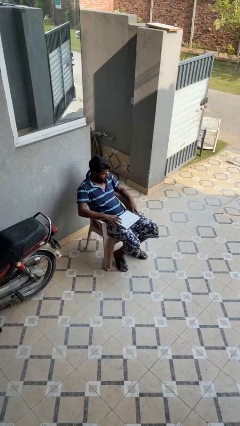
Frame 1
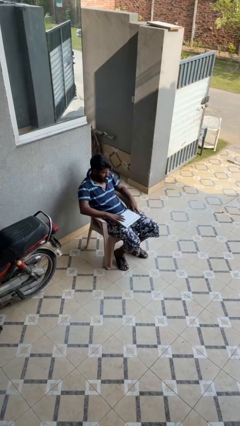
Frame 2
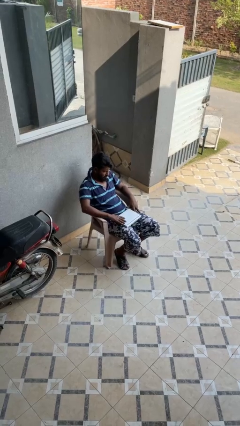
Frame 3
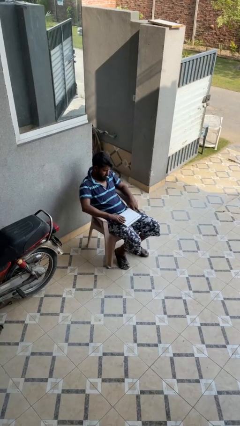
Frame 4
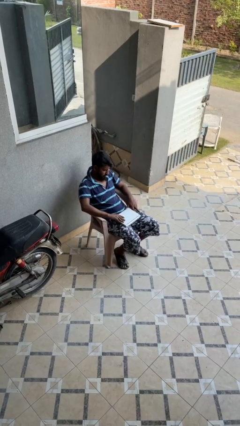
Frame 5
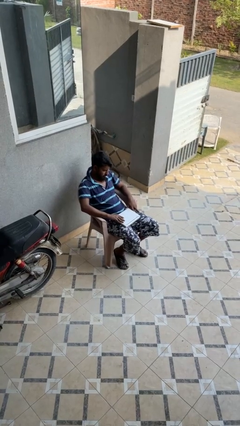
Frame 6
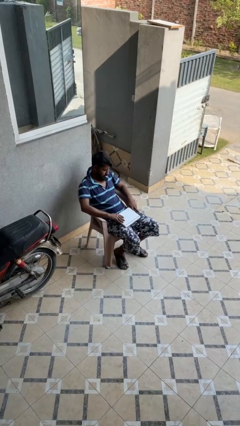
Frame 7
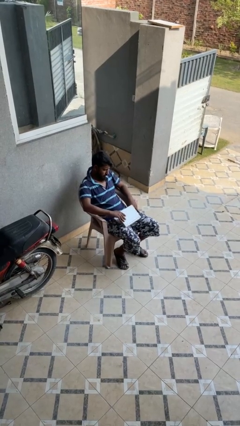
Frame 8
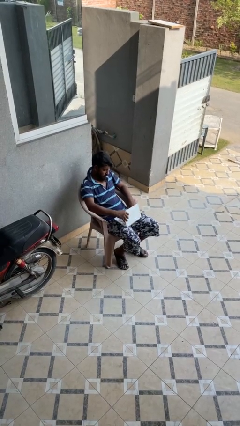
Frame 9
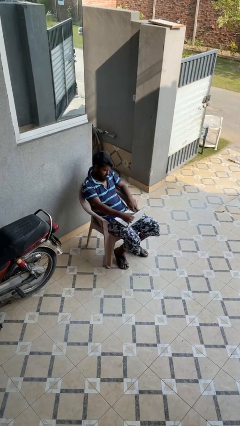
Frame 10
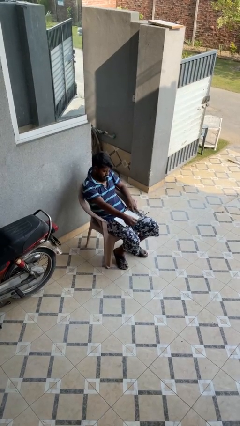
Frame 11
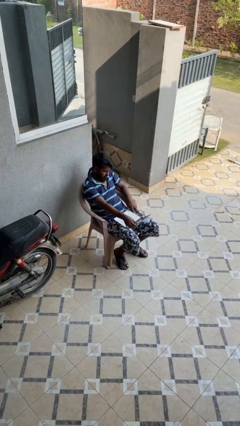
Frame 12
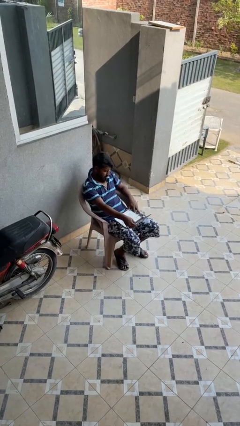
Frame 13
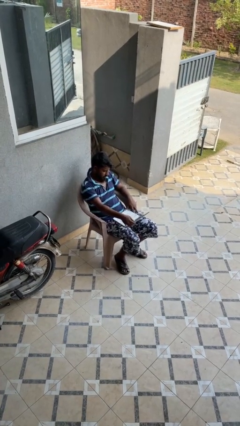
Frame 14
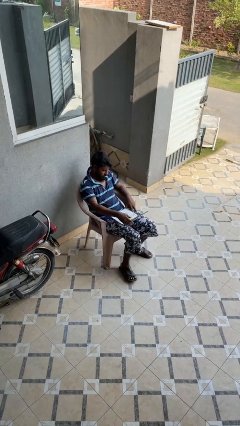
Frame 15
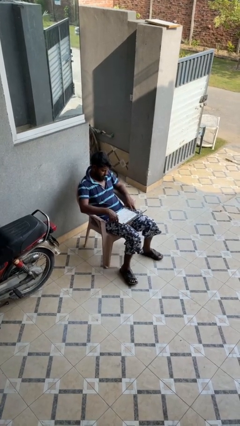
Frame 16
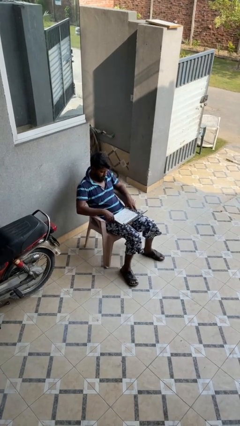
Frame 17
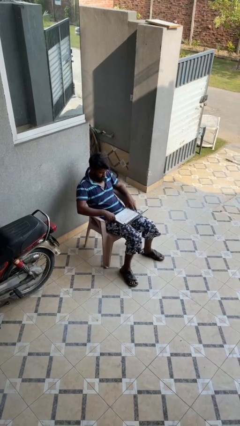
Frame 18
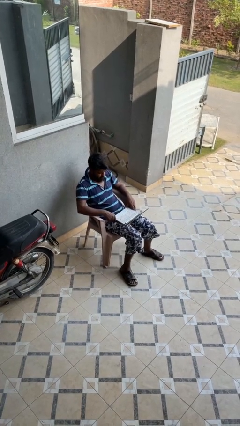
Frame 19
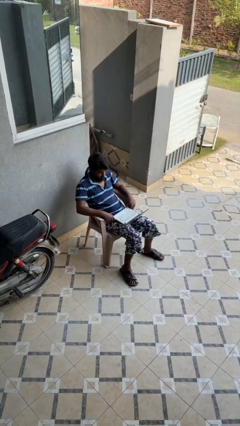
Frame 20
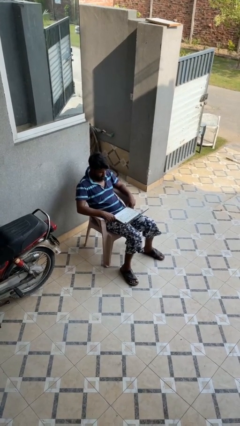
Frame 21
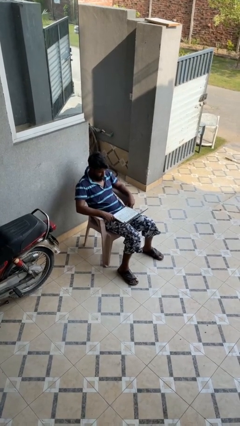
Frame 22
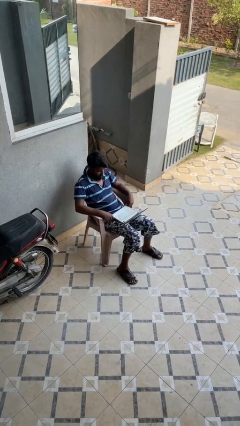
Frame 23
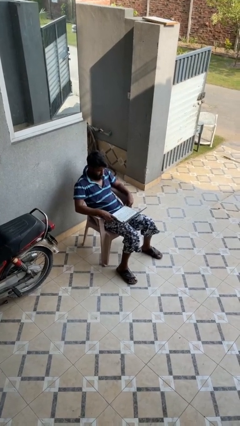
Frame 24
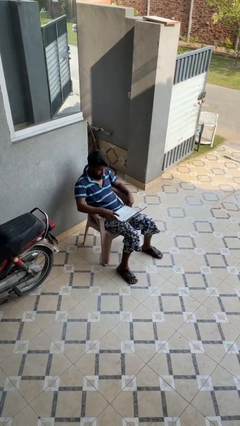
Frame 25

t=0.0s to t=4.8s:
person opens laptop

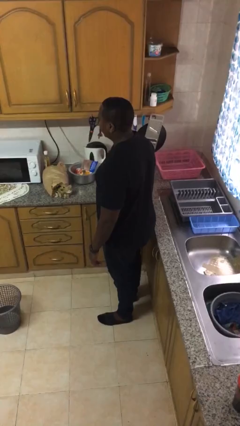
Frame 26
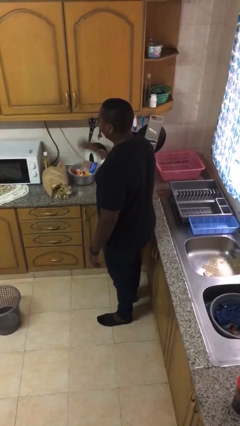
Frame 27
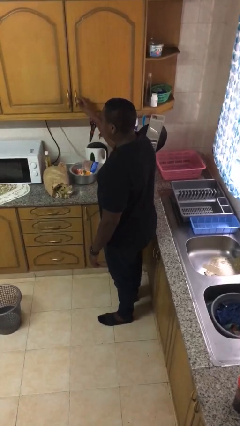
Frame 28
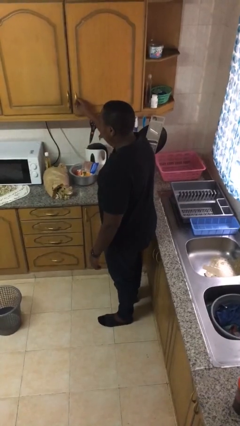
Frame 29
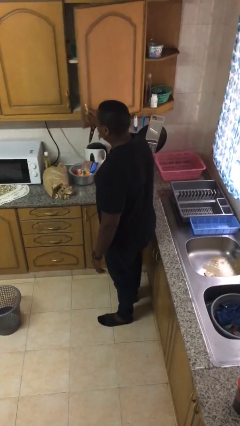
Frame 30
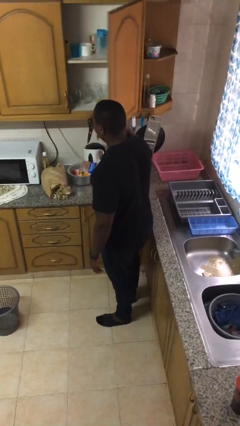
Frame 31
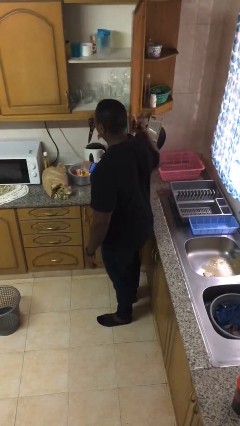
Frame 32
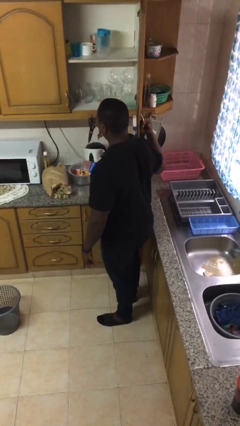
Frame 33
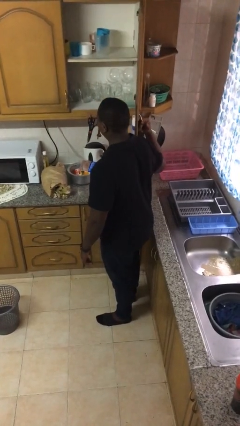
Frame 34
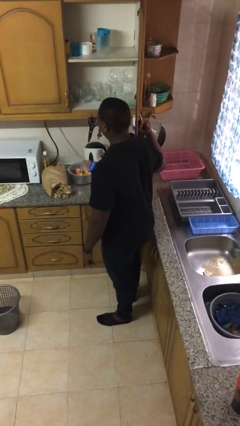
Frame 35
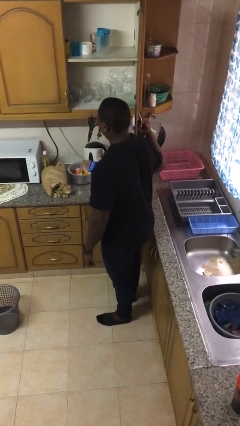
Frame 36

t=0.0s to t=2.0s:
person opens cabinet

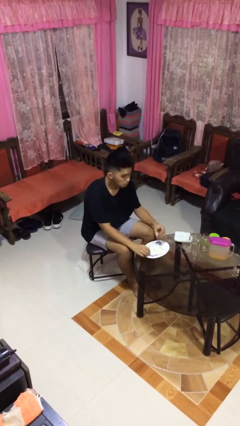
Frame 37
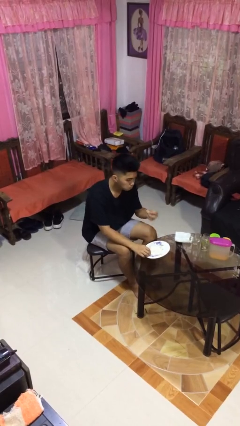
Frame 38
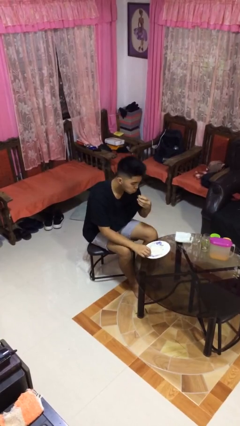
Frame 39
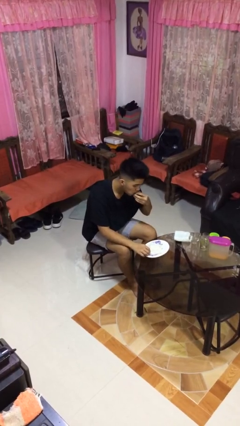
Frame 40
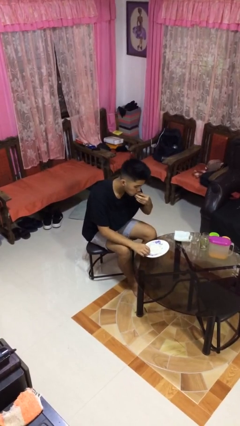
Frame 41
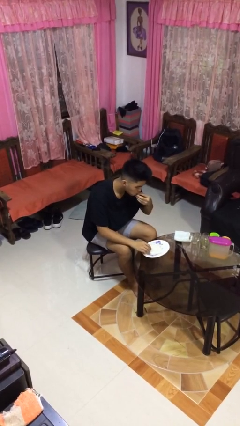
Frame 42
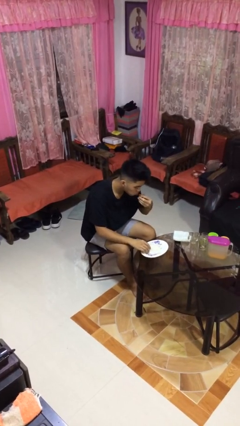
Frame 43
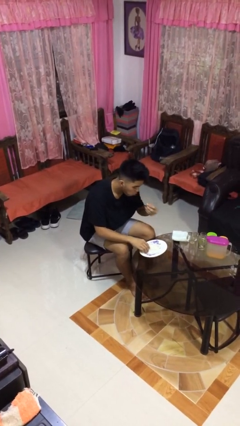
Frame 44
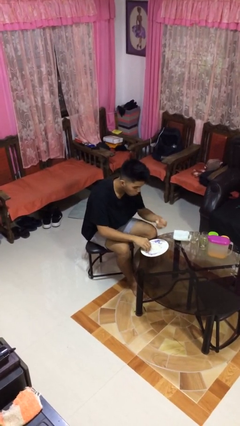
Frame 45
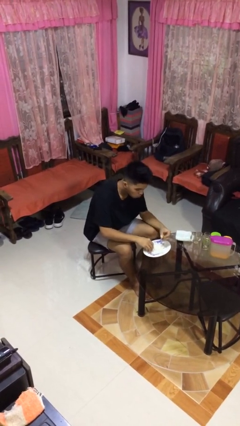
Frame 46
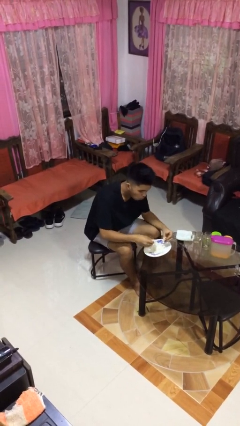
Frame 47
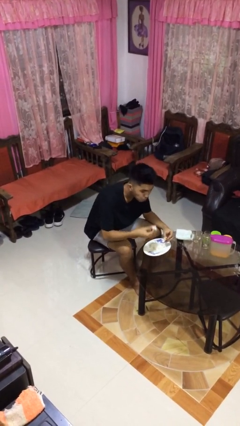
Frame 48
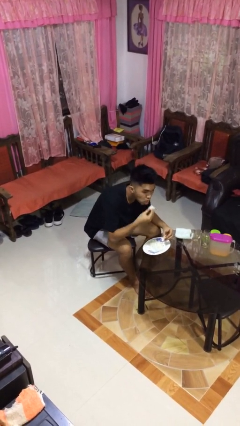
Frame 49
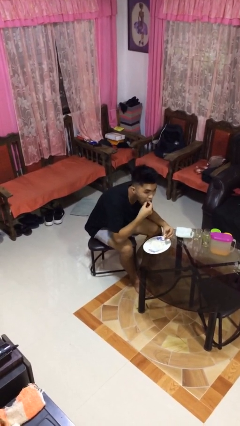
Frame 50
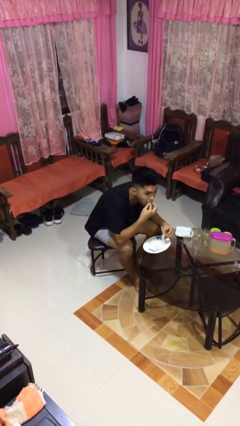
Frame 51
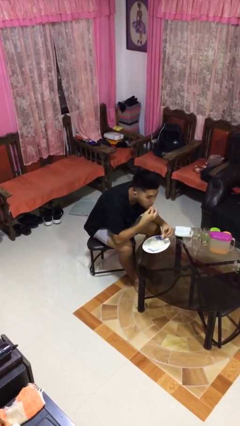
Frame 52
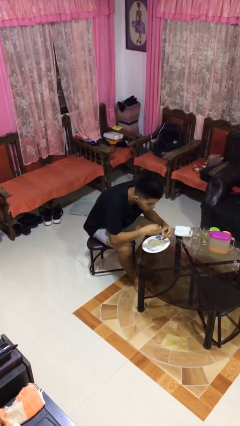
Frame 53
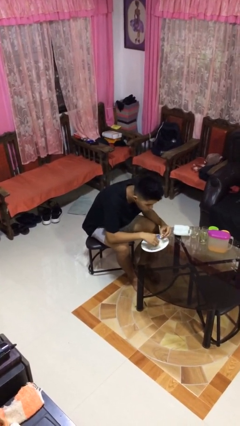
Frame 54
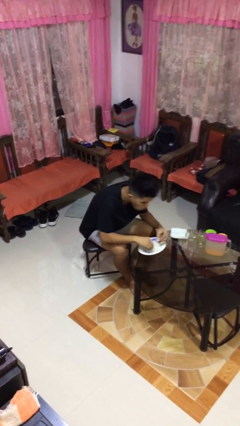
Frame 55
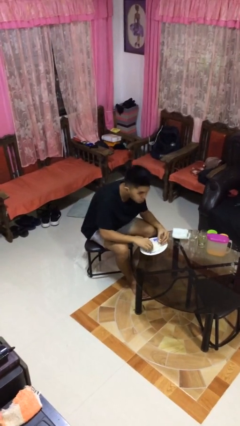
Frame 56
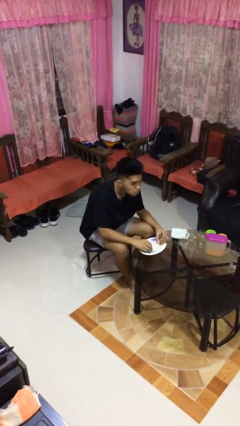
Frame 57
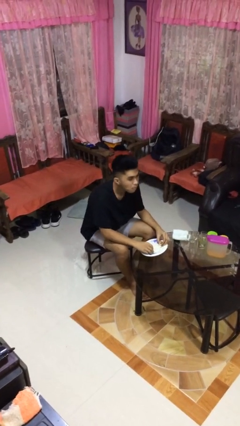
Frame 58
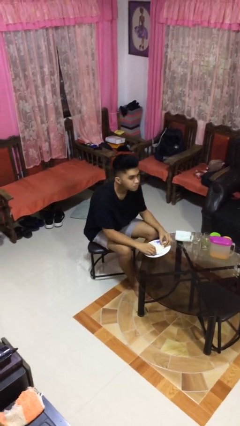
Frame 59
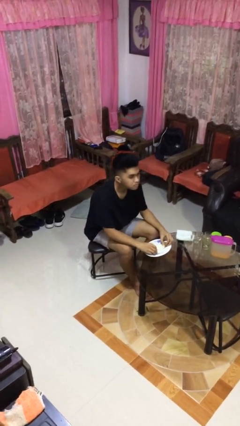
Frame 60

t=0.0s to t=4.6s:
person eats with hands

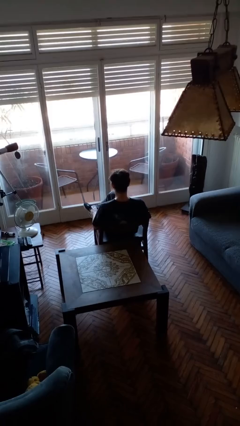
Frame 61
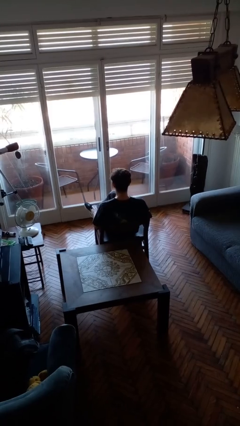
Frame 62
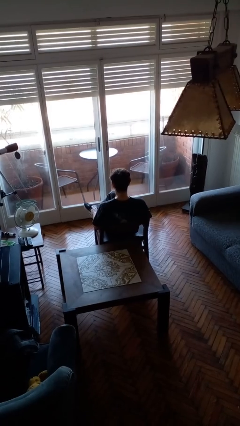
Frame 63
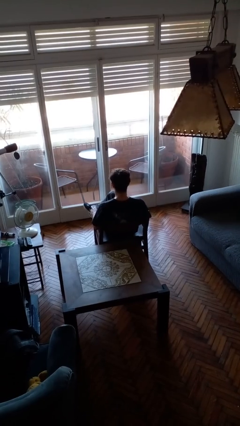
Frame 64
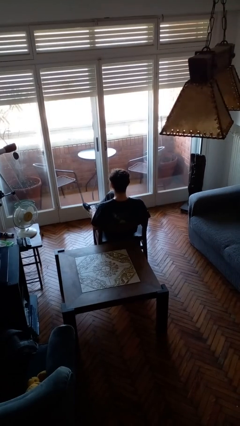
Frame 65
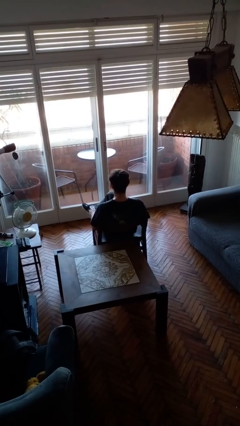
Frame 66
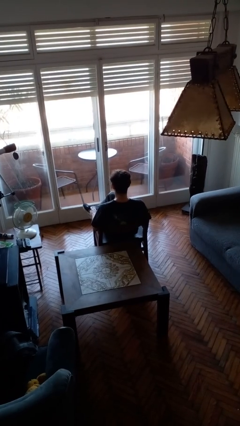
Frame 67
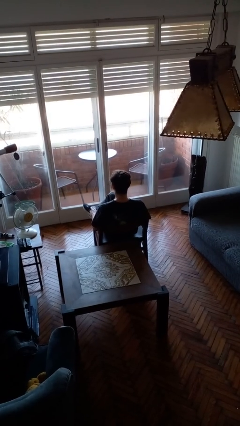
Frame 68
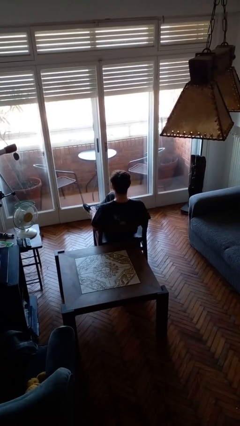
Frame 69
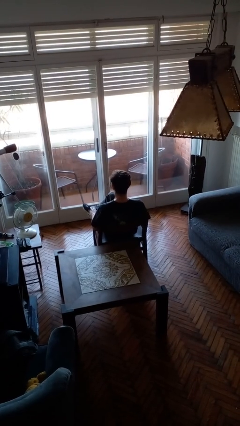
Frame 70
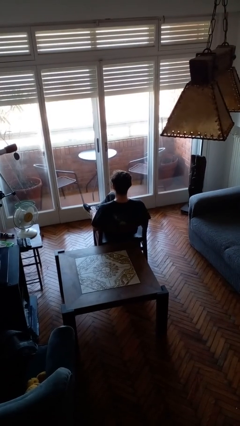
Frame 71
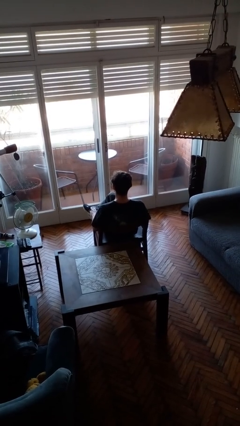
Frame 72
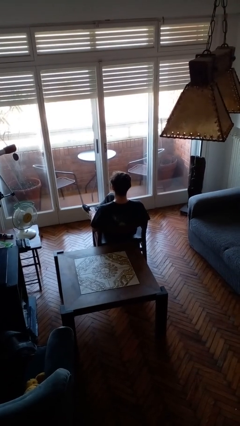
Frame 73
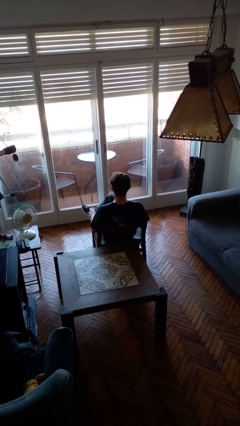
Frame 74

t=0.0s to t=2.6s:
person nods head

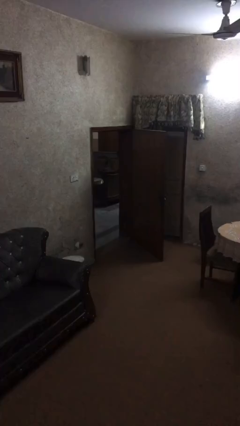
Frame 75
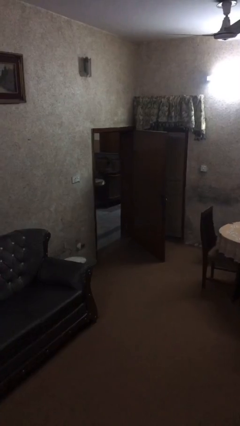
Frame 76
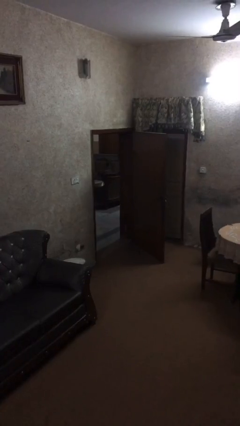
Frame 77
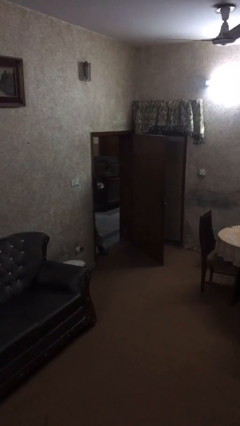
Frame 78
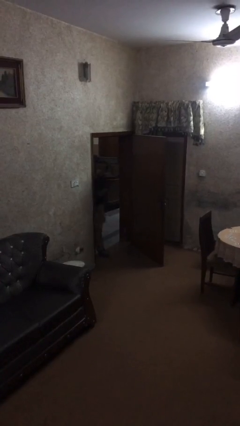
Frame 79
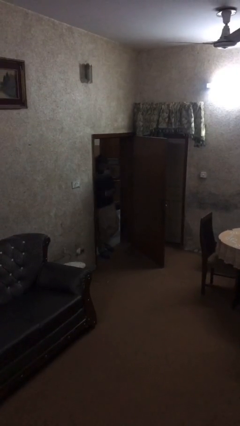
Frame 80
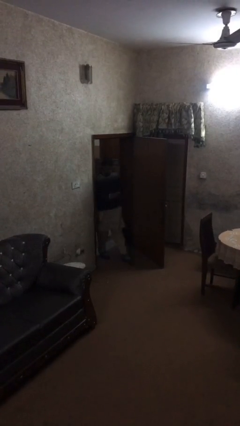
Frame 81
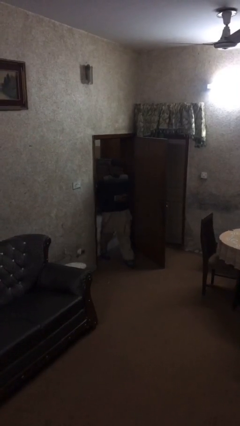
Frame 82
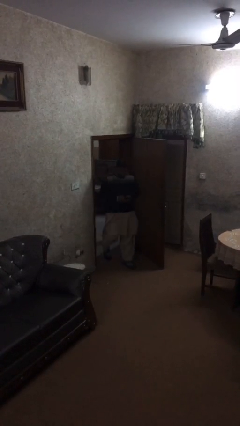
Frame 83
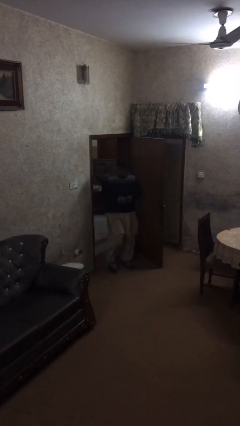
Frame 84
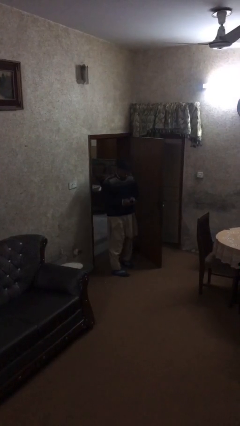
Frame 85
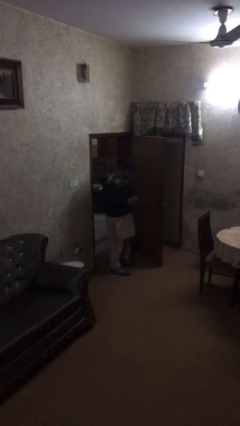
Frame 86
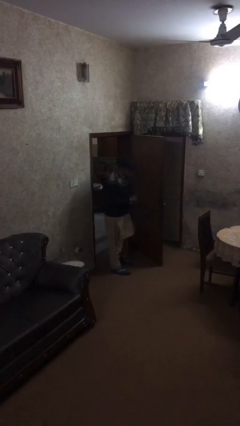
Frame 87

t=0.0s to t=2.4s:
person enters scene through structure

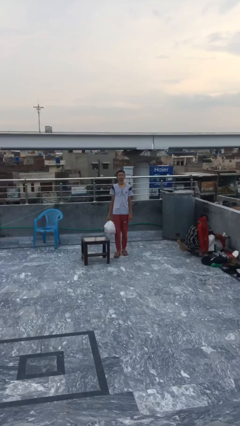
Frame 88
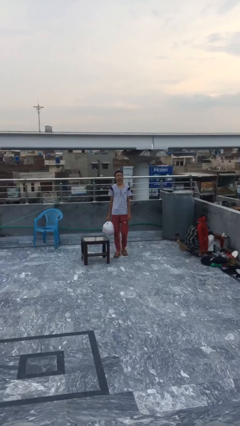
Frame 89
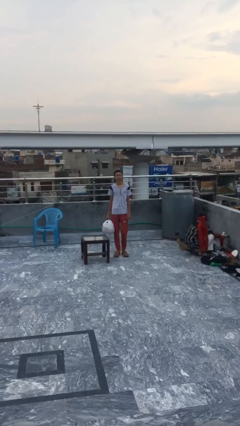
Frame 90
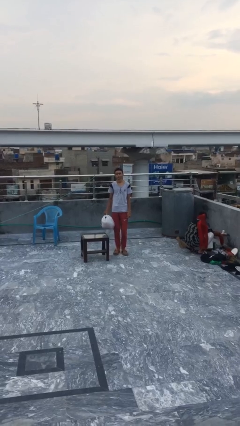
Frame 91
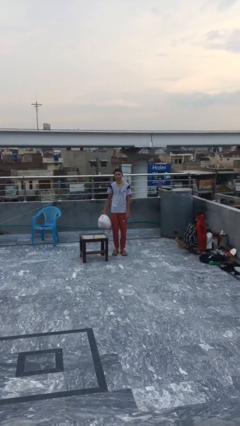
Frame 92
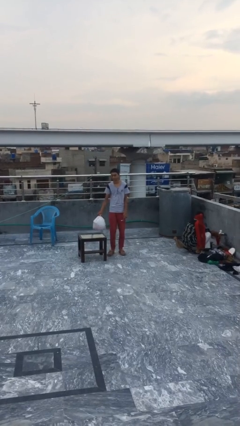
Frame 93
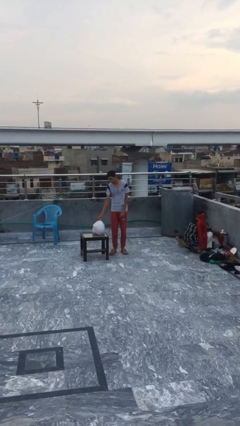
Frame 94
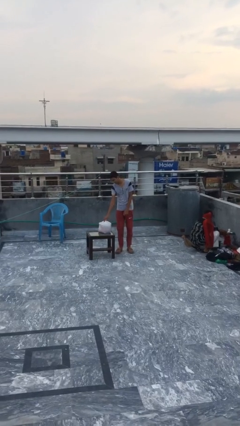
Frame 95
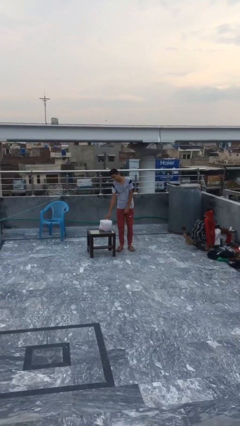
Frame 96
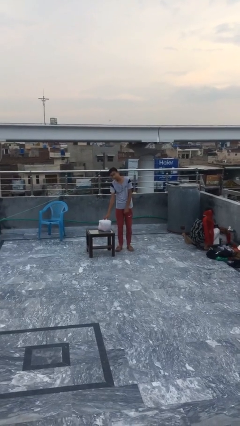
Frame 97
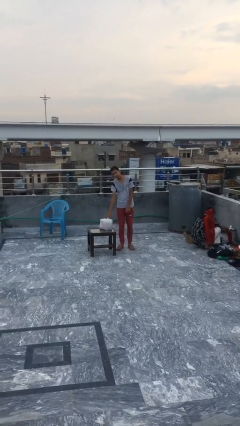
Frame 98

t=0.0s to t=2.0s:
person puts down object on table
